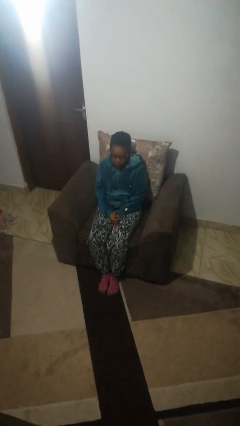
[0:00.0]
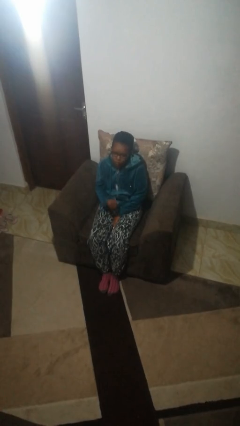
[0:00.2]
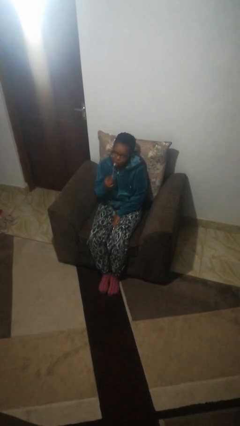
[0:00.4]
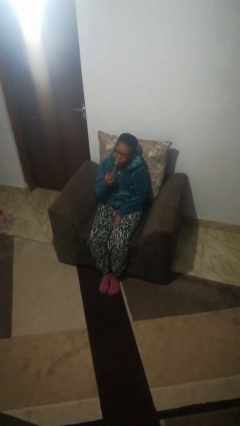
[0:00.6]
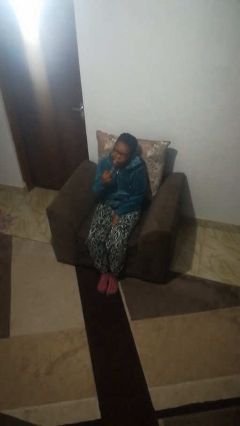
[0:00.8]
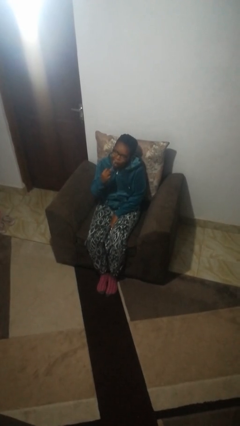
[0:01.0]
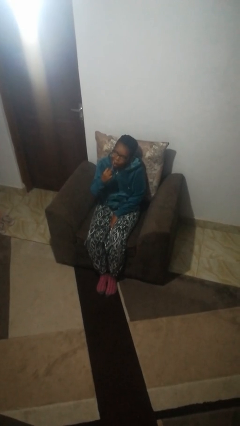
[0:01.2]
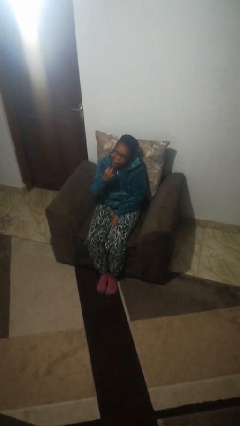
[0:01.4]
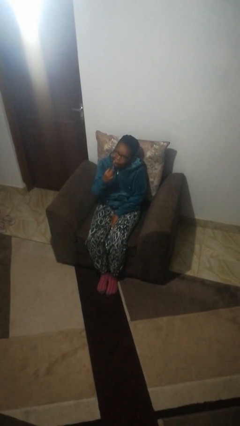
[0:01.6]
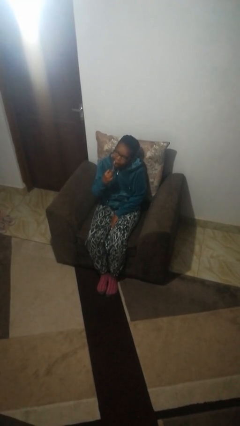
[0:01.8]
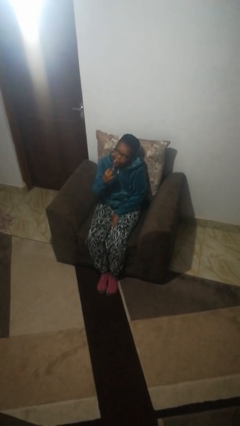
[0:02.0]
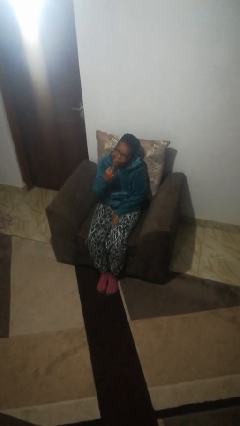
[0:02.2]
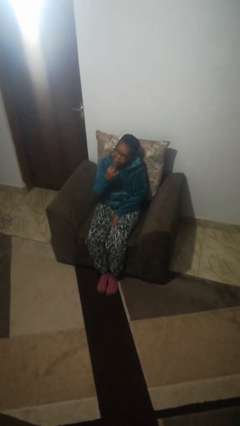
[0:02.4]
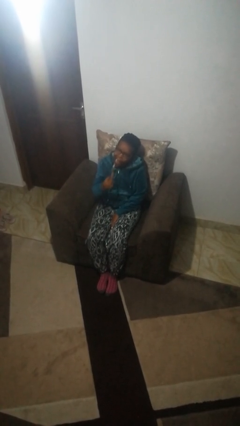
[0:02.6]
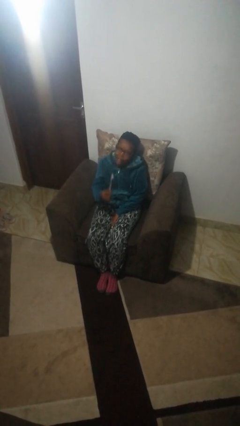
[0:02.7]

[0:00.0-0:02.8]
person brushes teeth

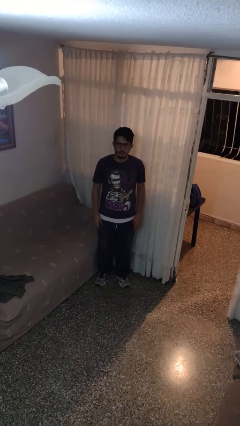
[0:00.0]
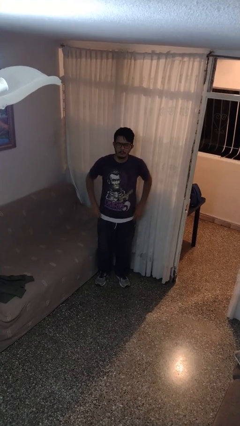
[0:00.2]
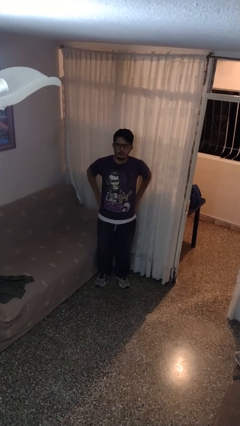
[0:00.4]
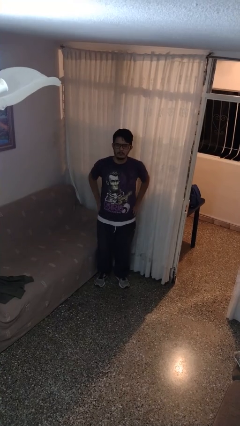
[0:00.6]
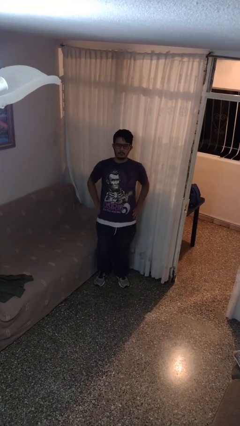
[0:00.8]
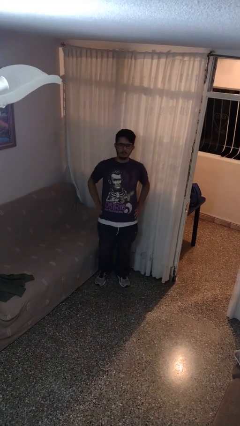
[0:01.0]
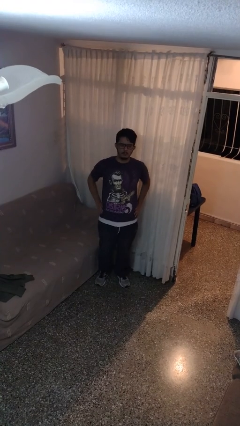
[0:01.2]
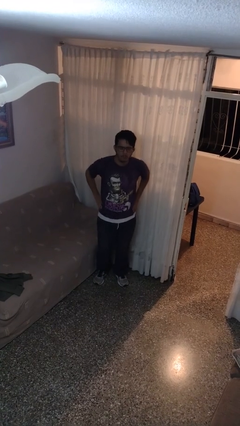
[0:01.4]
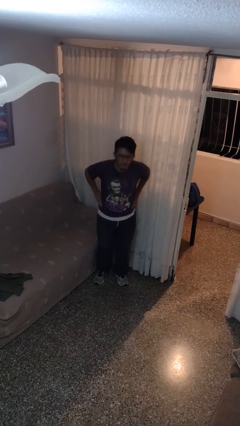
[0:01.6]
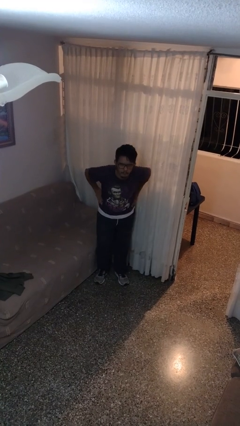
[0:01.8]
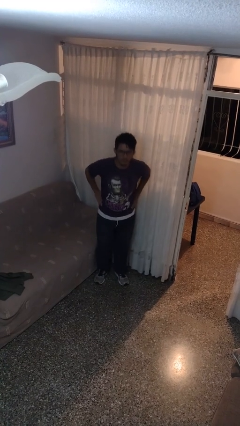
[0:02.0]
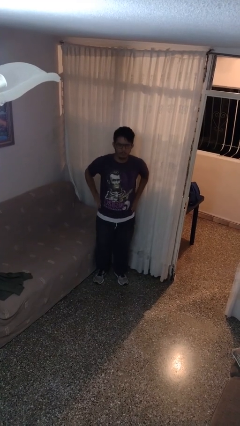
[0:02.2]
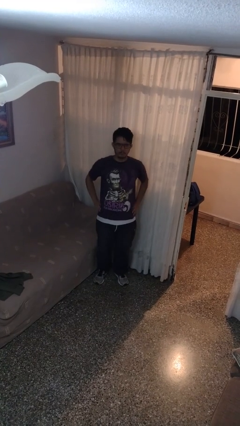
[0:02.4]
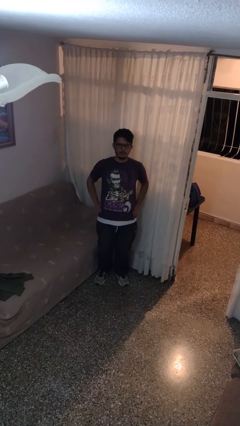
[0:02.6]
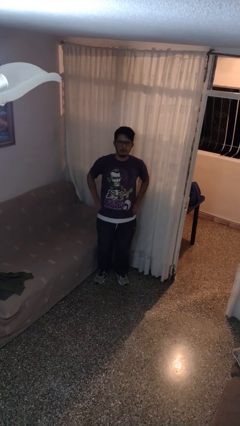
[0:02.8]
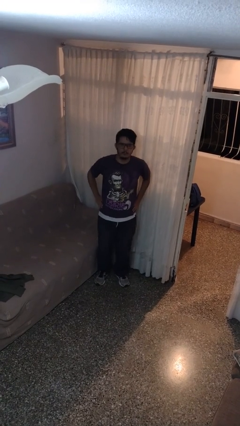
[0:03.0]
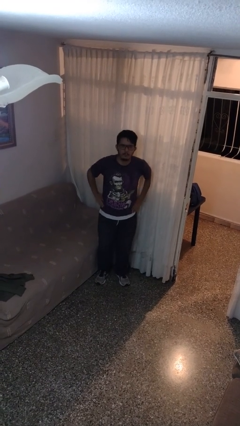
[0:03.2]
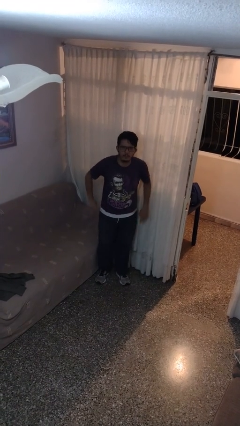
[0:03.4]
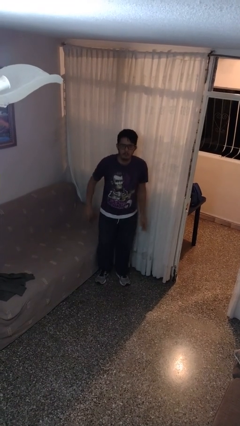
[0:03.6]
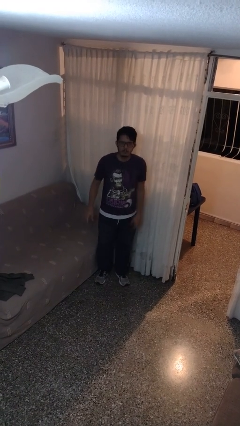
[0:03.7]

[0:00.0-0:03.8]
person wiggles hips

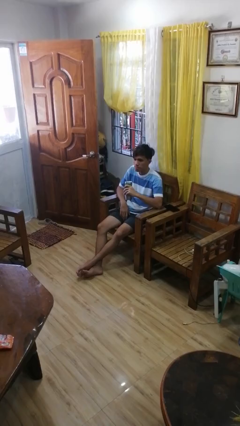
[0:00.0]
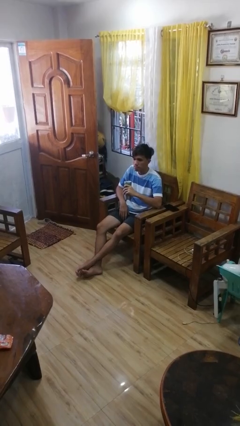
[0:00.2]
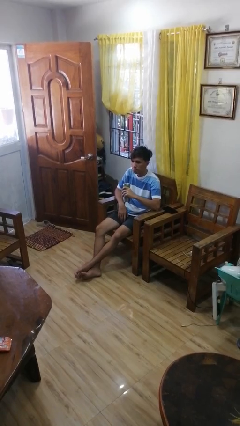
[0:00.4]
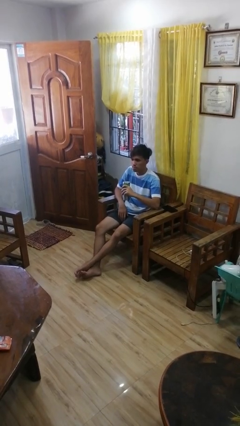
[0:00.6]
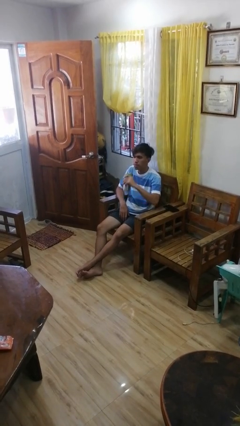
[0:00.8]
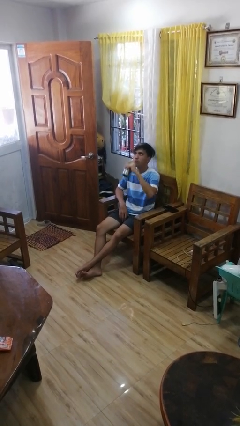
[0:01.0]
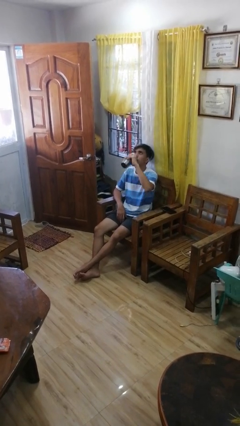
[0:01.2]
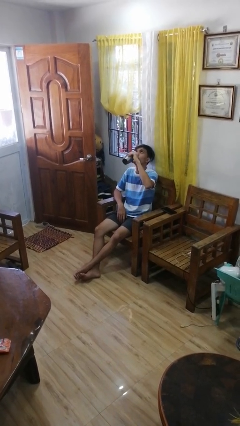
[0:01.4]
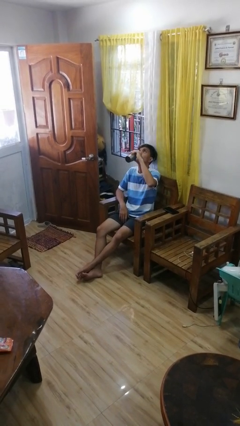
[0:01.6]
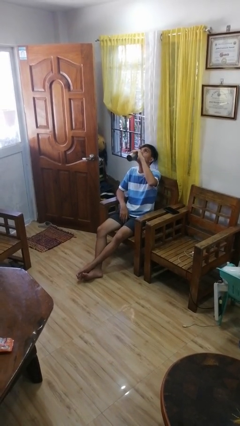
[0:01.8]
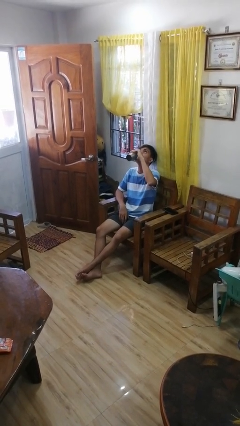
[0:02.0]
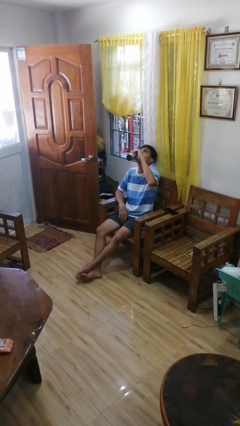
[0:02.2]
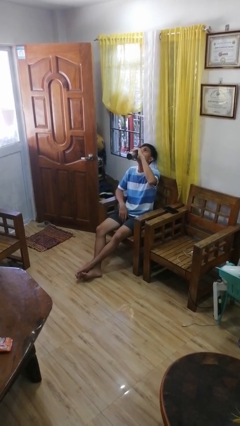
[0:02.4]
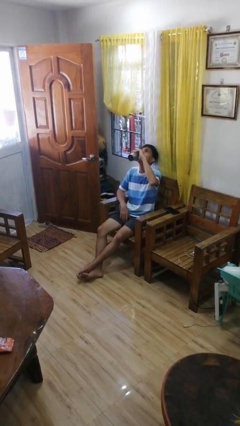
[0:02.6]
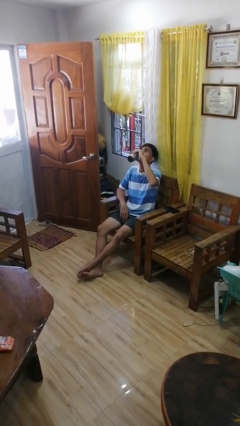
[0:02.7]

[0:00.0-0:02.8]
person drinks from bottle

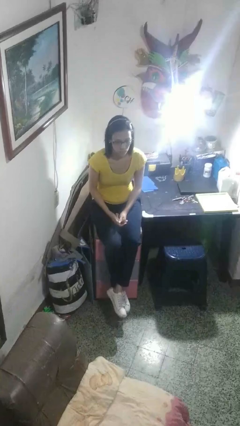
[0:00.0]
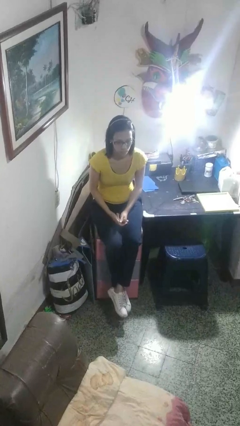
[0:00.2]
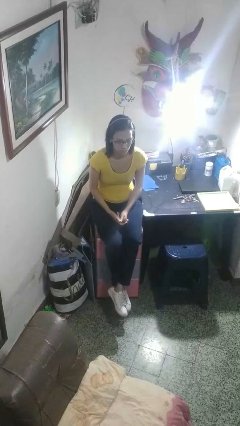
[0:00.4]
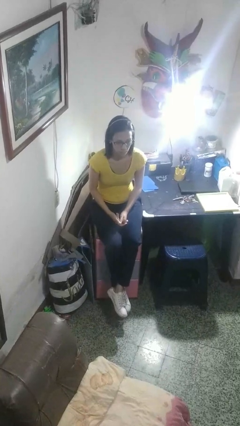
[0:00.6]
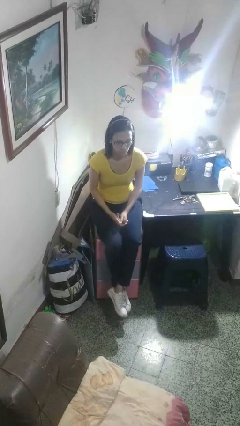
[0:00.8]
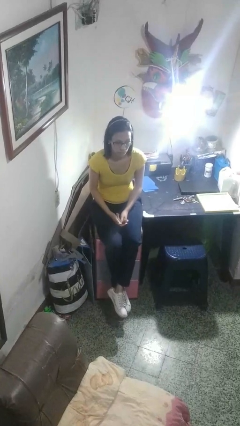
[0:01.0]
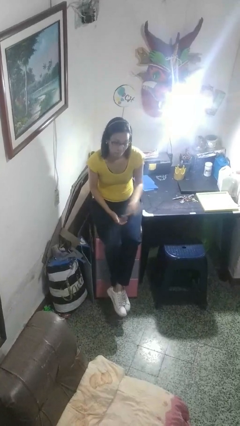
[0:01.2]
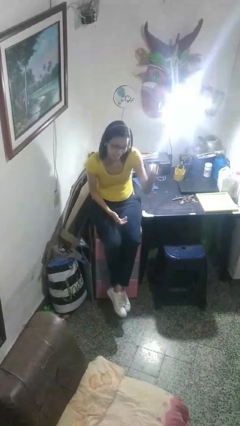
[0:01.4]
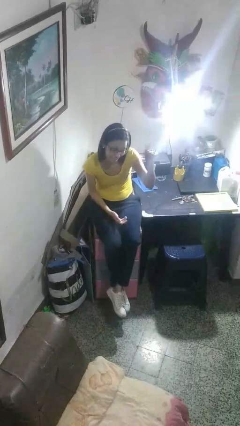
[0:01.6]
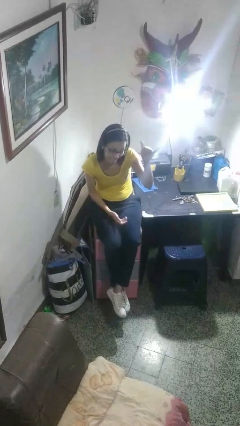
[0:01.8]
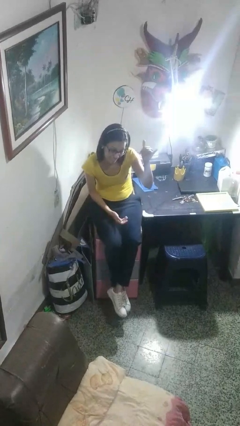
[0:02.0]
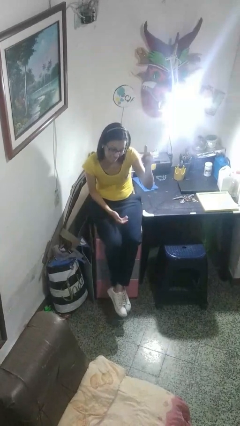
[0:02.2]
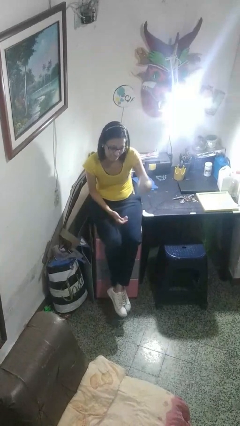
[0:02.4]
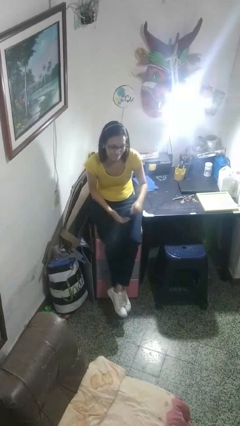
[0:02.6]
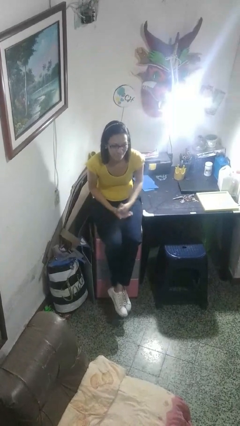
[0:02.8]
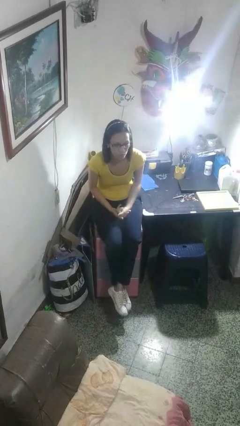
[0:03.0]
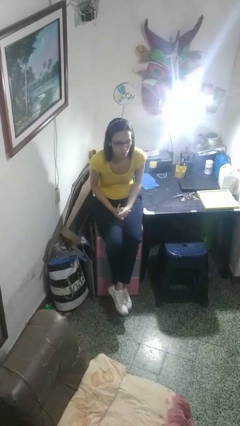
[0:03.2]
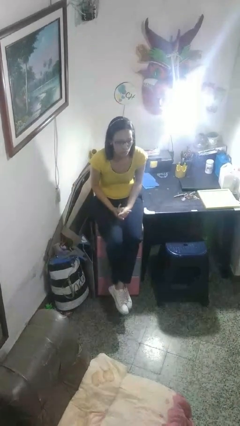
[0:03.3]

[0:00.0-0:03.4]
person gestures hang loose

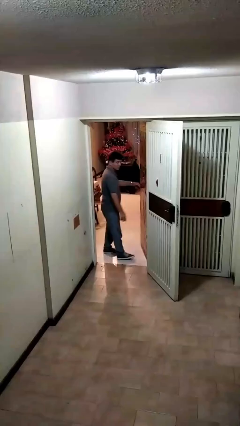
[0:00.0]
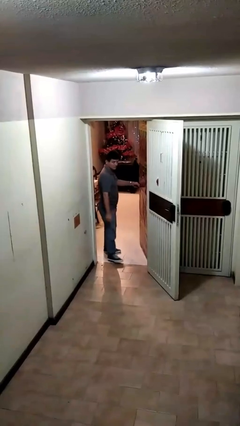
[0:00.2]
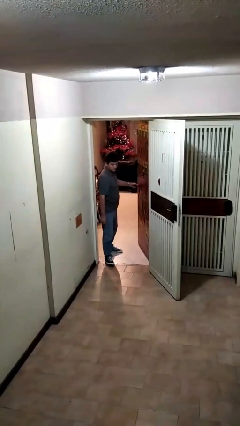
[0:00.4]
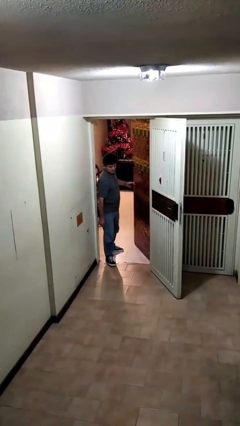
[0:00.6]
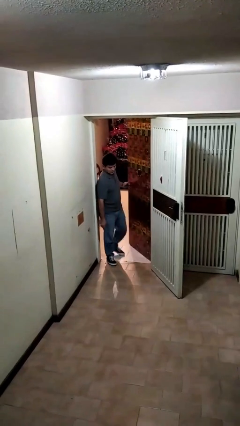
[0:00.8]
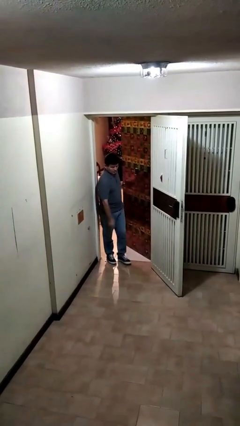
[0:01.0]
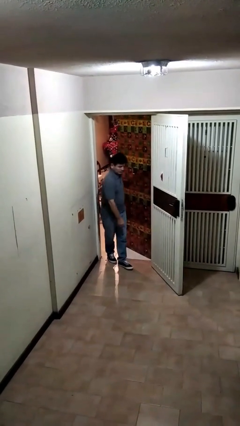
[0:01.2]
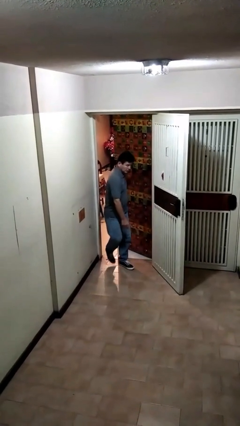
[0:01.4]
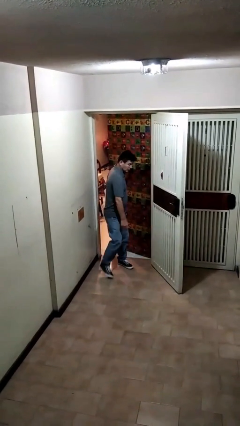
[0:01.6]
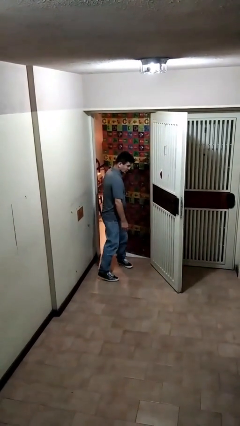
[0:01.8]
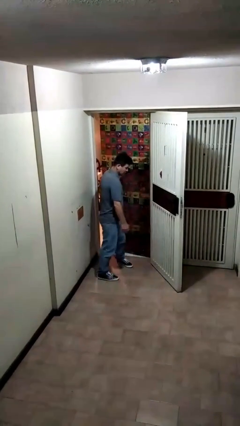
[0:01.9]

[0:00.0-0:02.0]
person closes facility door

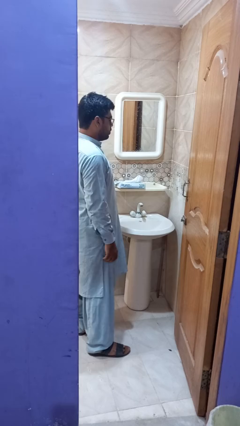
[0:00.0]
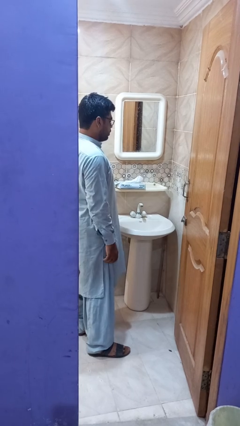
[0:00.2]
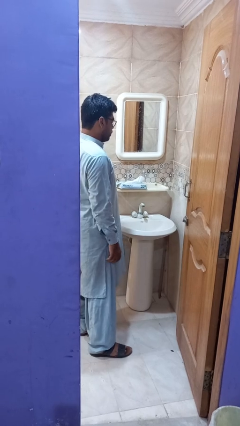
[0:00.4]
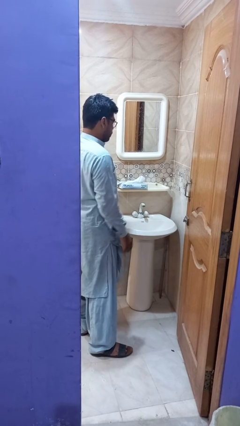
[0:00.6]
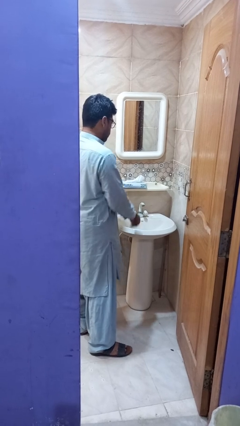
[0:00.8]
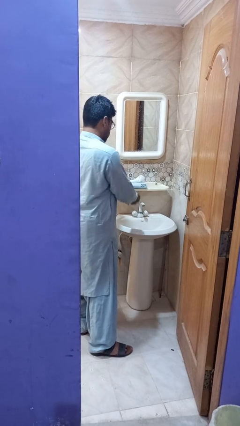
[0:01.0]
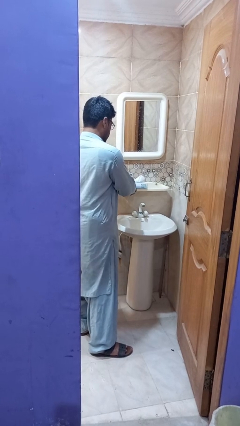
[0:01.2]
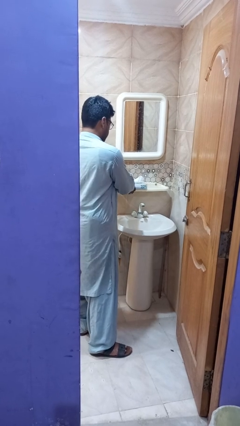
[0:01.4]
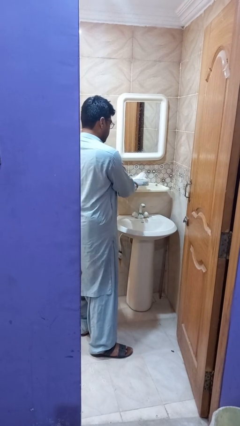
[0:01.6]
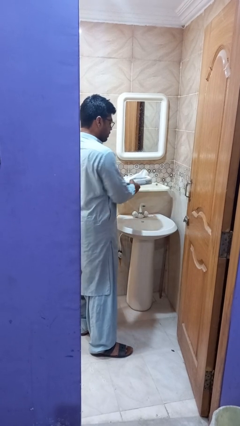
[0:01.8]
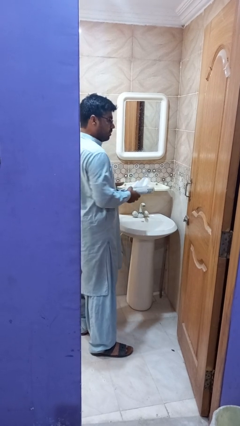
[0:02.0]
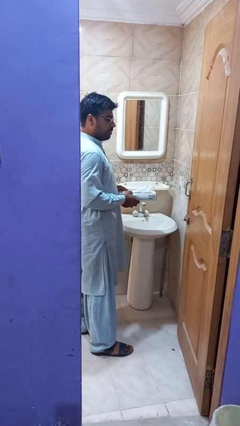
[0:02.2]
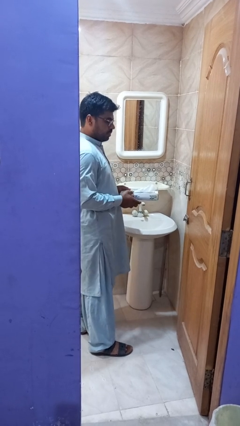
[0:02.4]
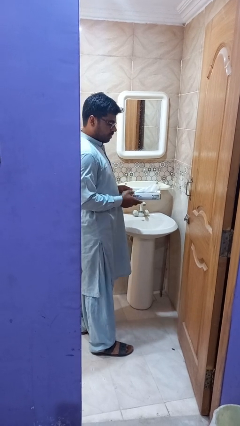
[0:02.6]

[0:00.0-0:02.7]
person picks up object from countertop
